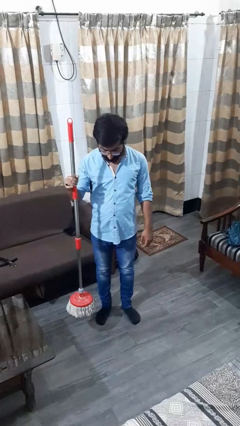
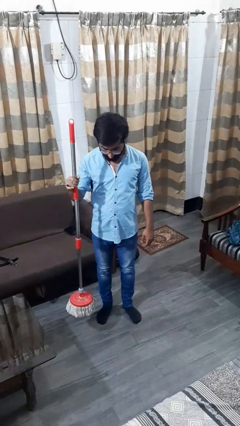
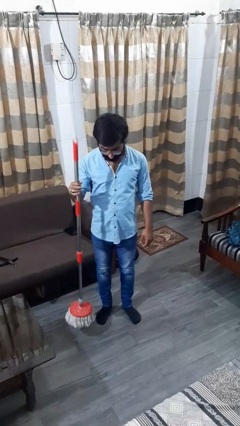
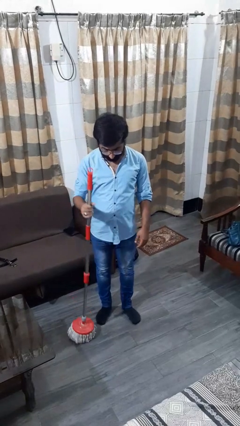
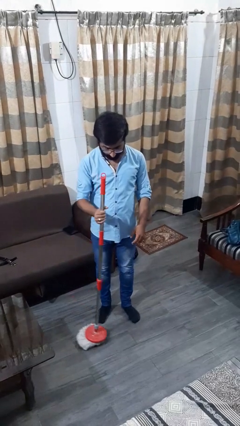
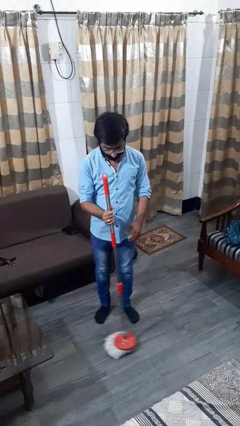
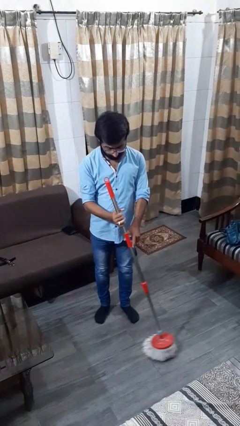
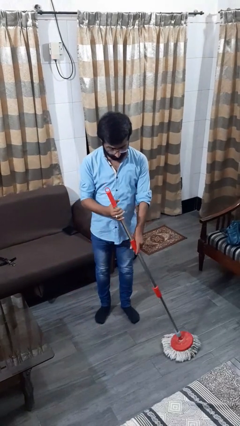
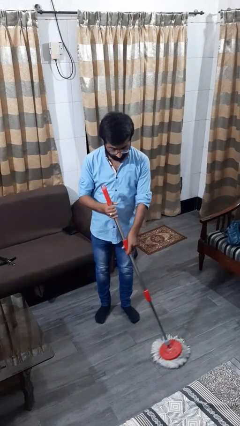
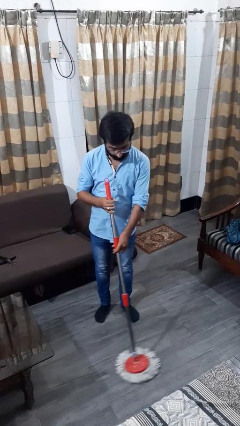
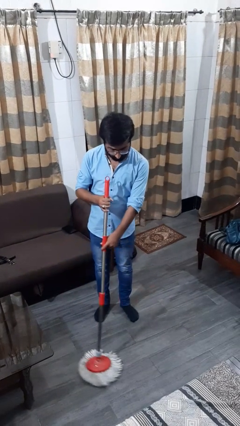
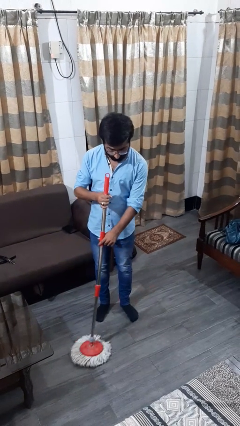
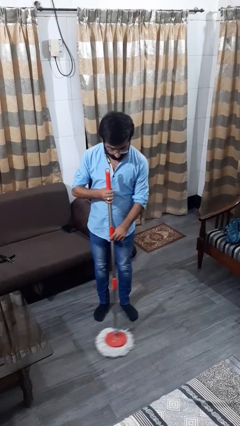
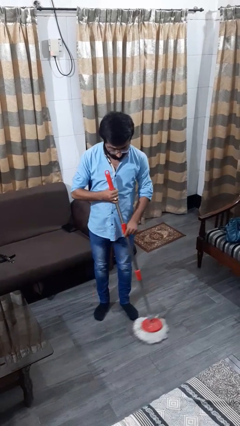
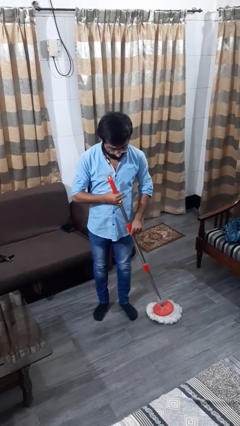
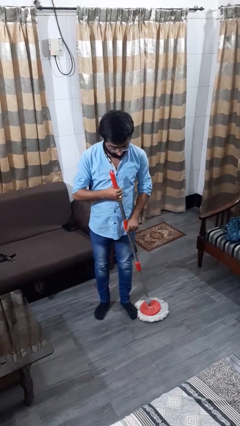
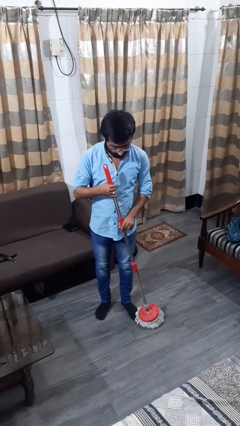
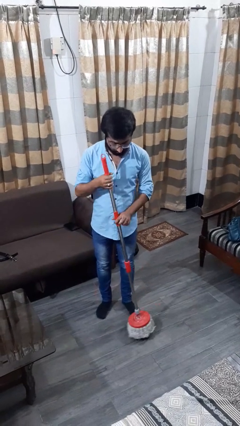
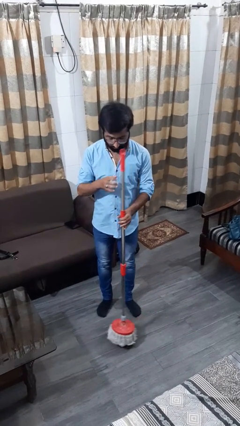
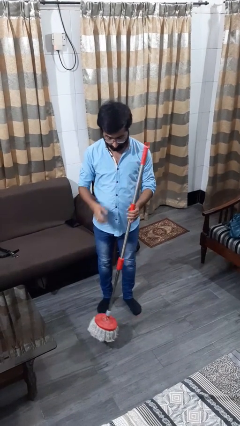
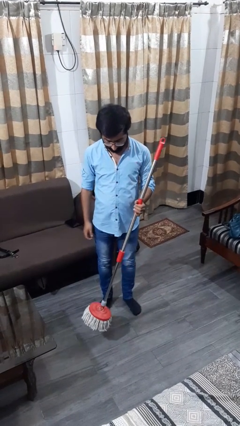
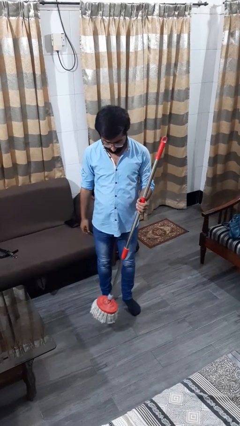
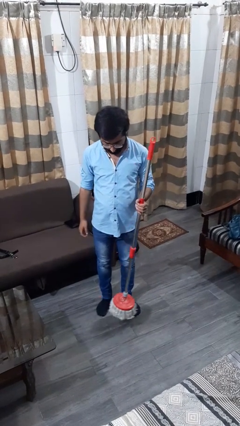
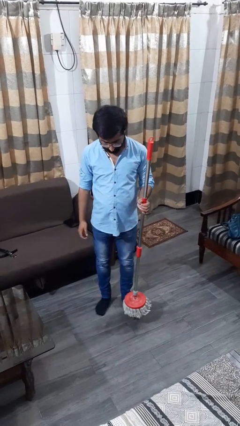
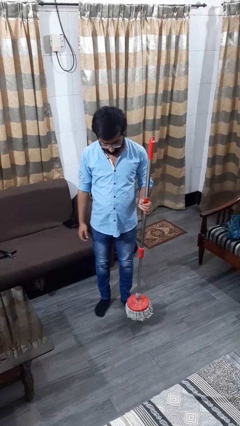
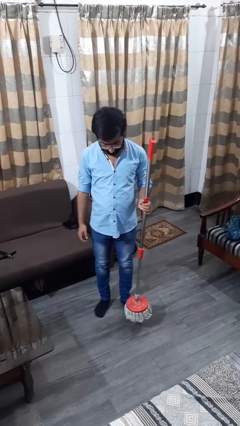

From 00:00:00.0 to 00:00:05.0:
person sweeps floor

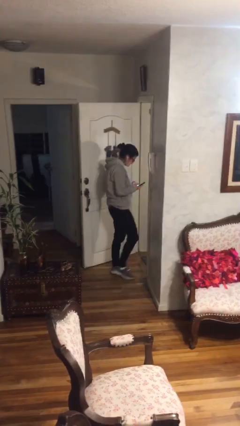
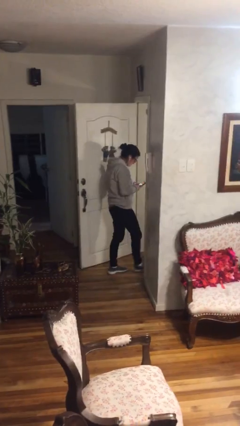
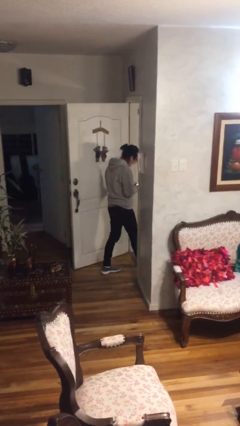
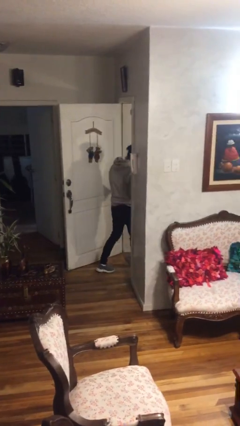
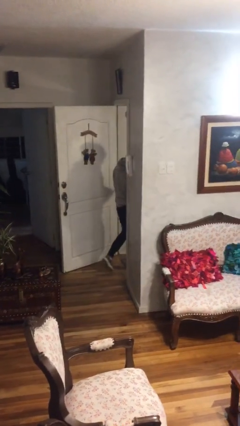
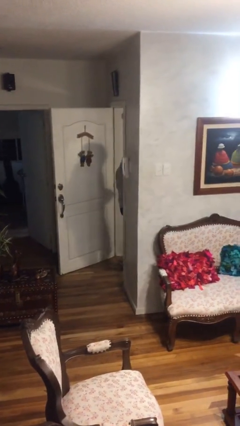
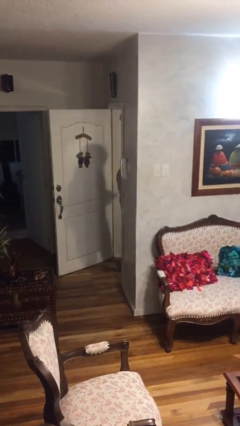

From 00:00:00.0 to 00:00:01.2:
person exits scene through structure

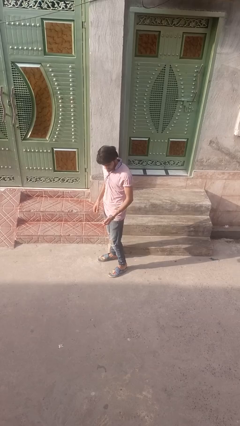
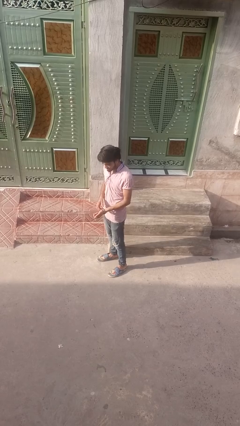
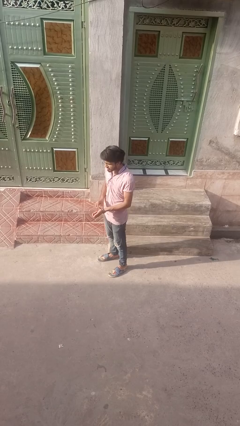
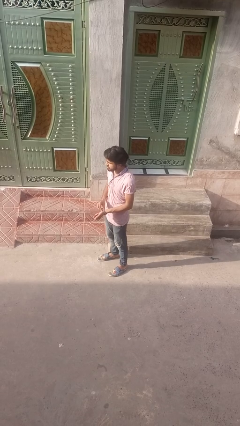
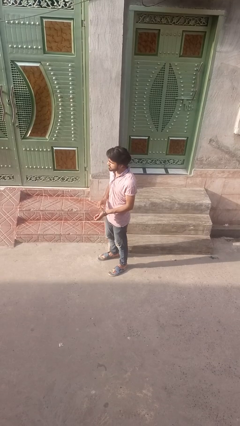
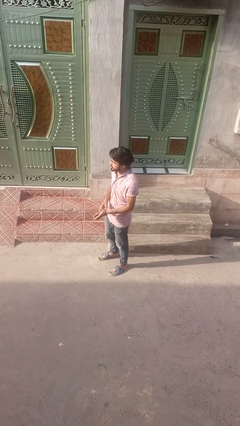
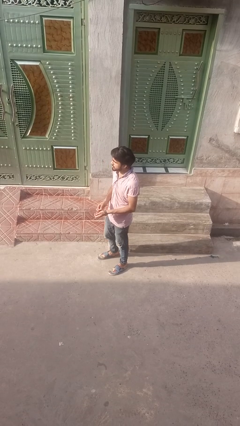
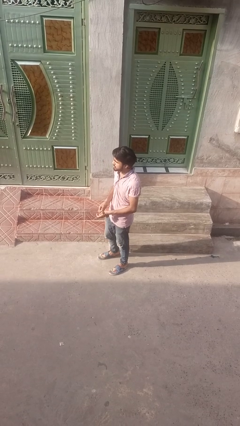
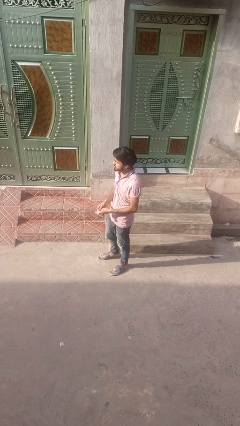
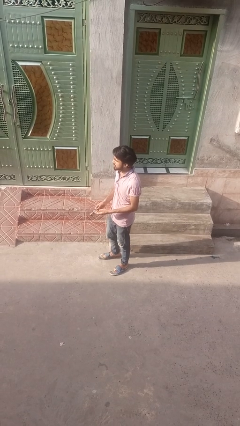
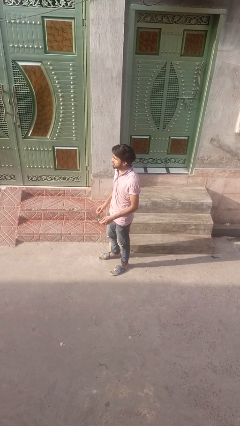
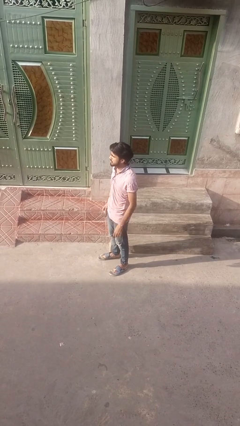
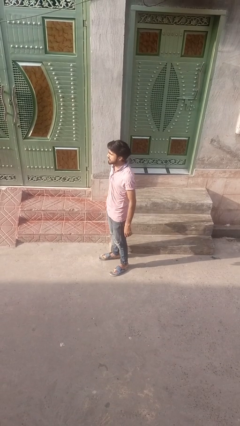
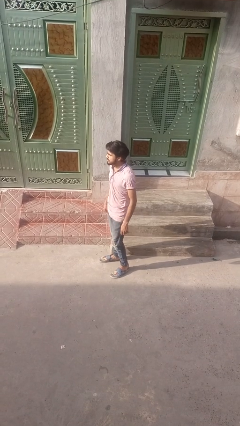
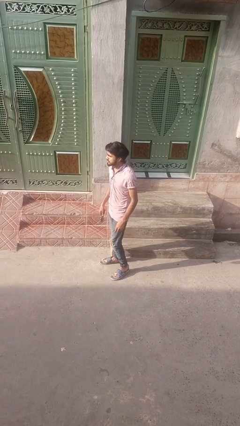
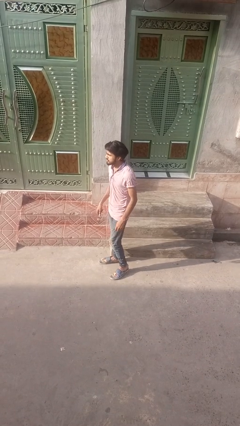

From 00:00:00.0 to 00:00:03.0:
person takes off wristwatch

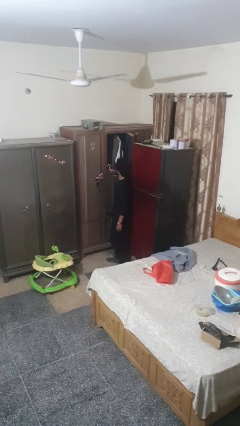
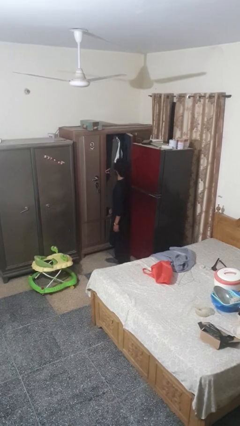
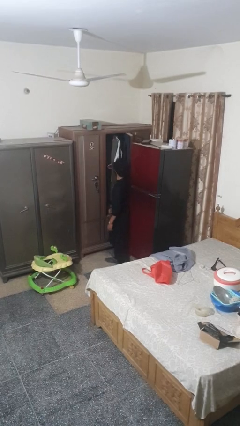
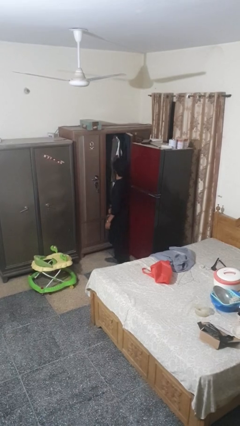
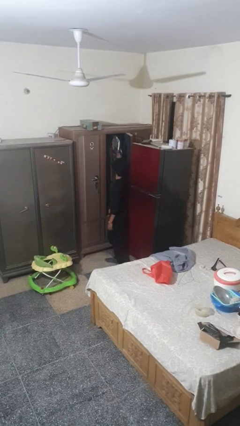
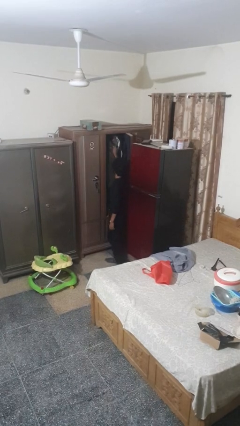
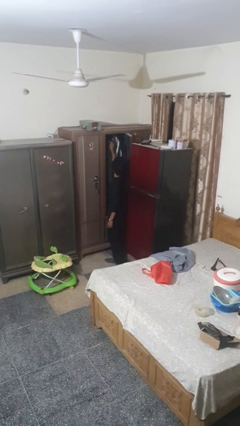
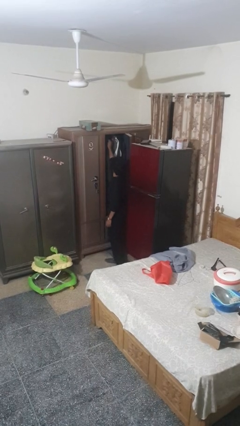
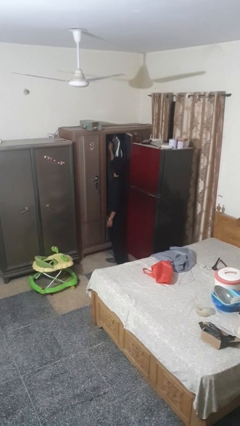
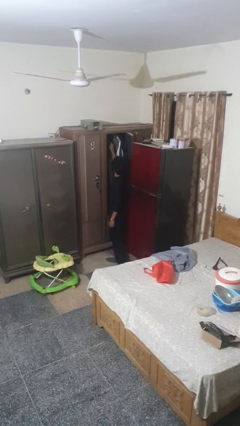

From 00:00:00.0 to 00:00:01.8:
person puts clothes into closet

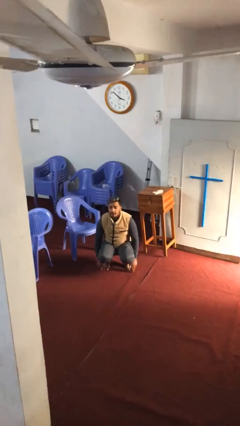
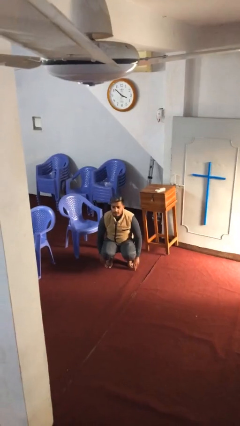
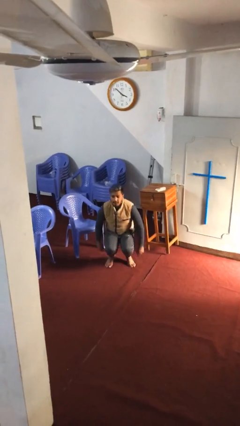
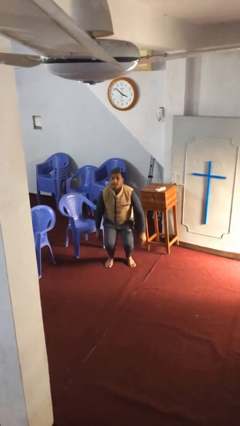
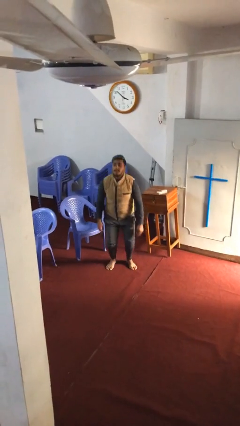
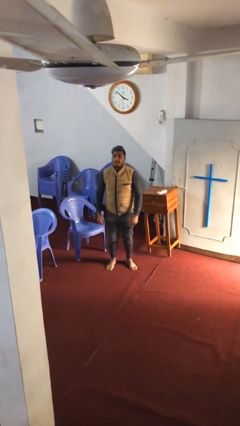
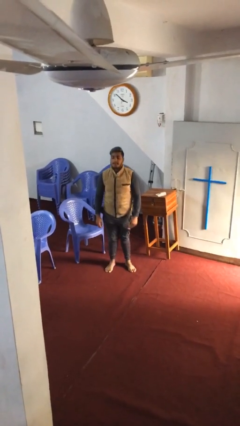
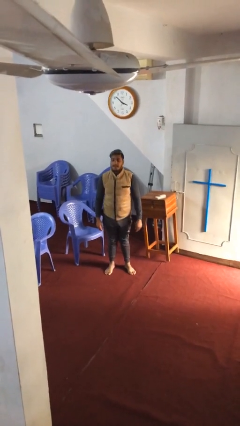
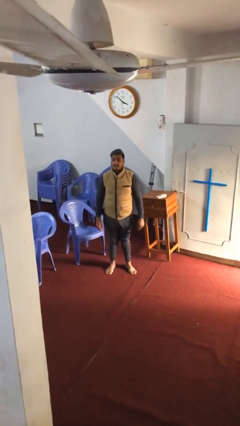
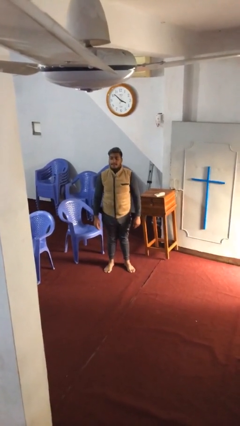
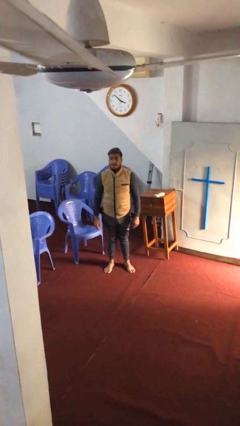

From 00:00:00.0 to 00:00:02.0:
person stands up

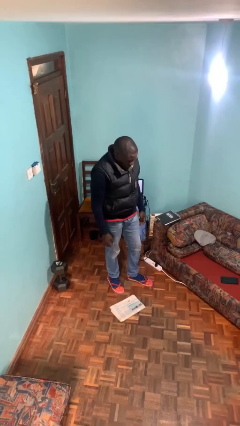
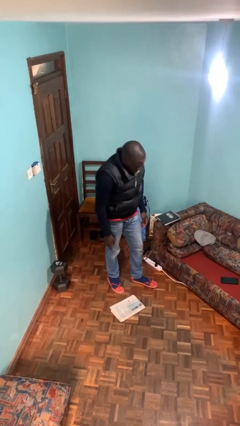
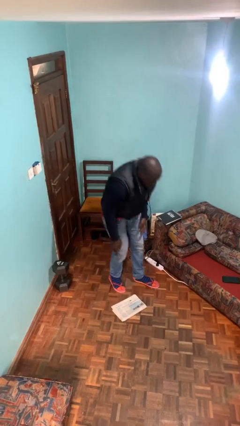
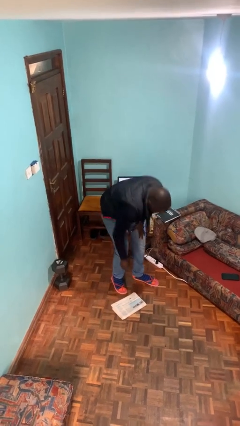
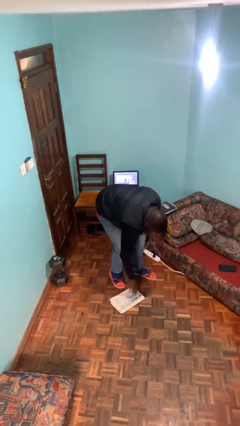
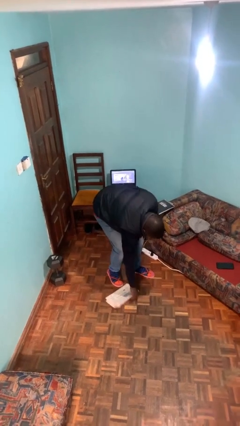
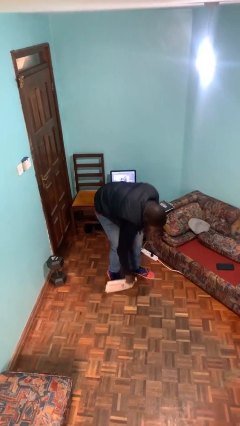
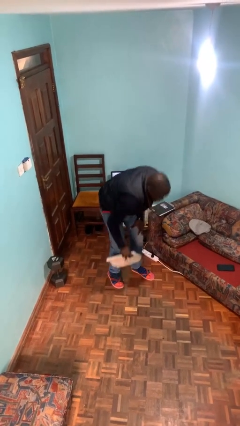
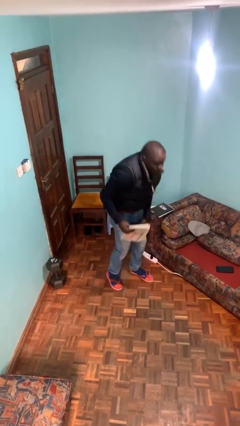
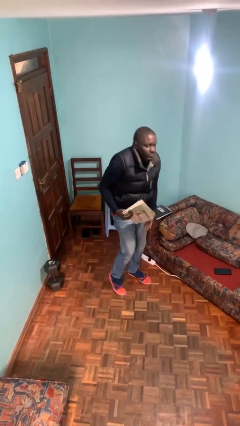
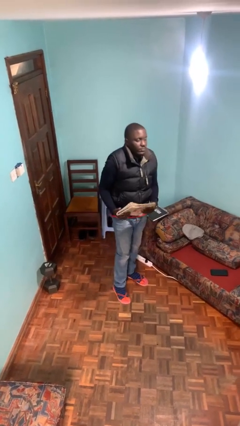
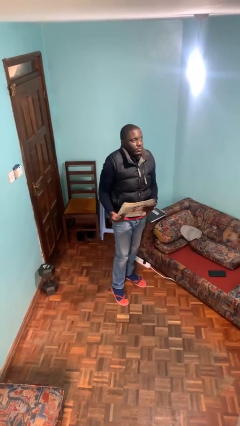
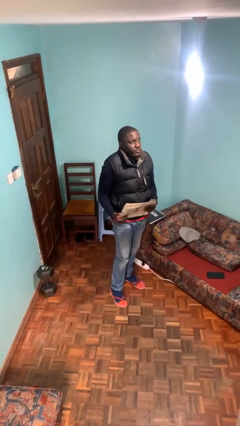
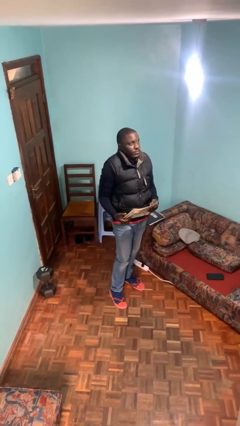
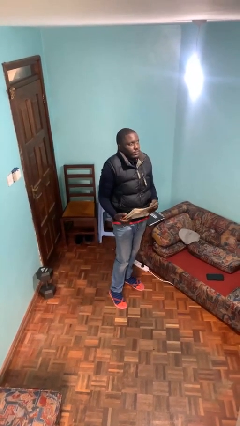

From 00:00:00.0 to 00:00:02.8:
person picks up object from floor

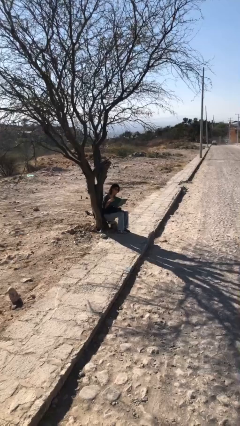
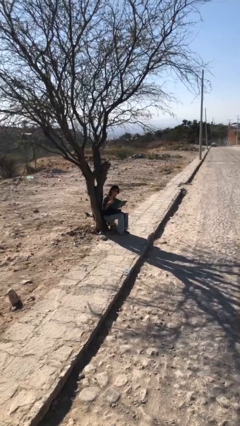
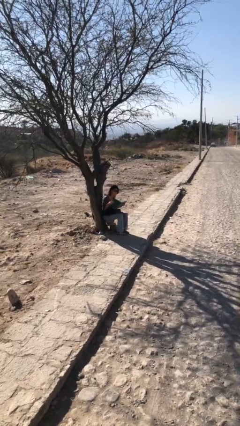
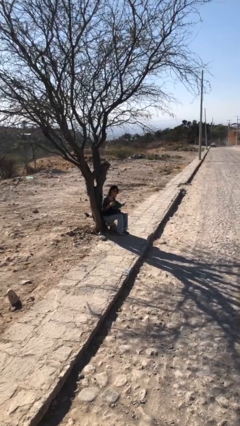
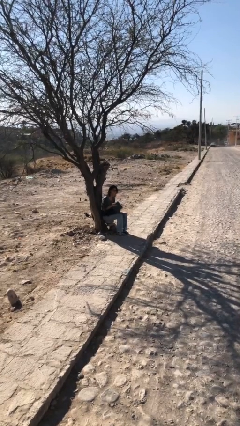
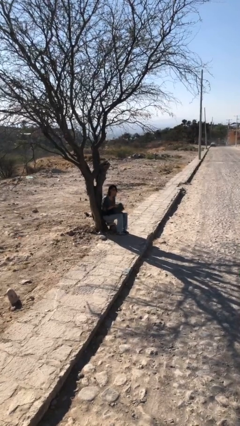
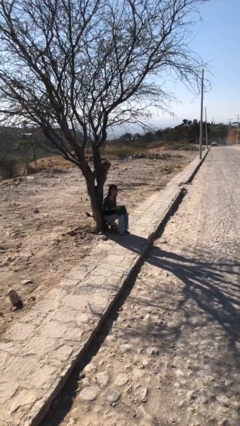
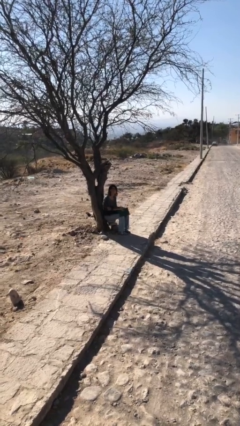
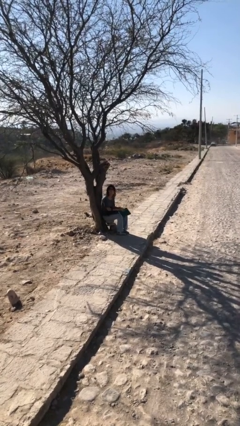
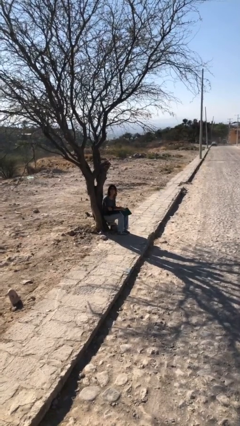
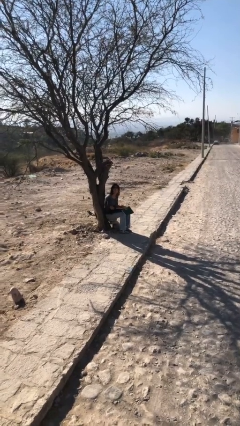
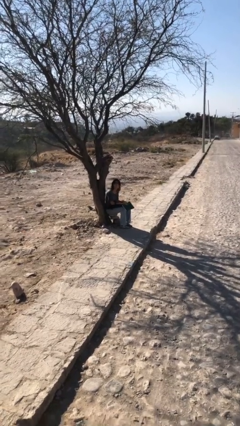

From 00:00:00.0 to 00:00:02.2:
person reads document
